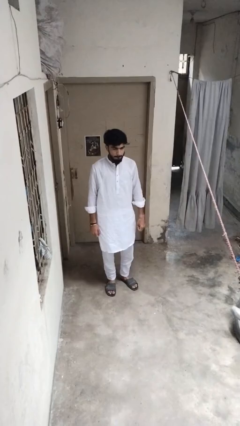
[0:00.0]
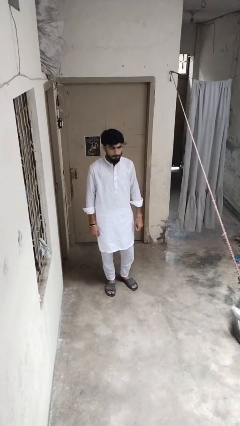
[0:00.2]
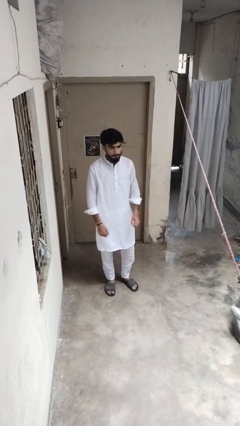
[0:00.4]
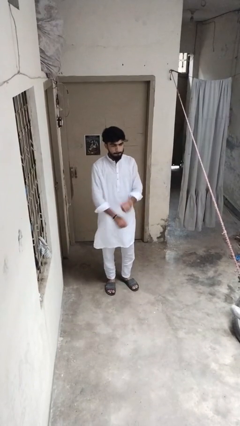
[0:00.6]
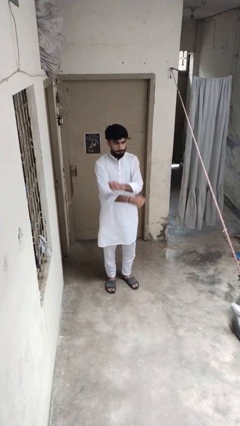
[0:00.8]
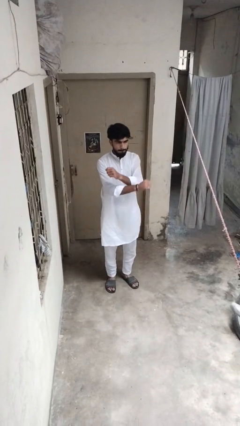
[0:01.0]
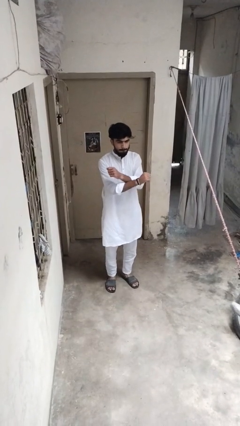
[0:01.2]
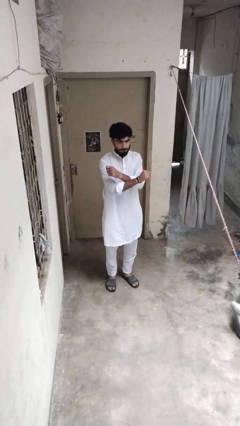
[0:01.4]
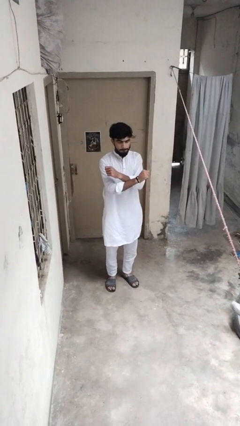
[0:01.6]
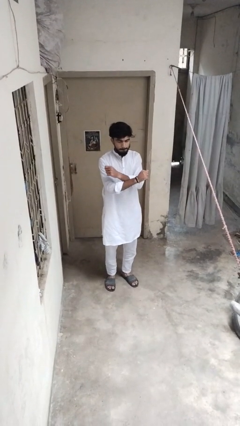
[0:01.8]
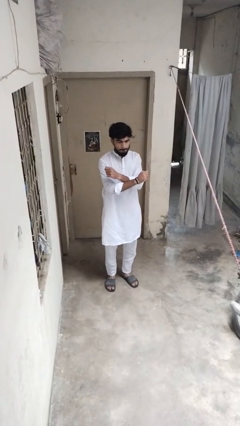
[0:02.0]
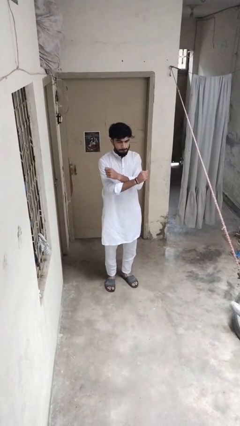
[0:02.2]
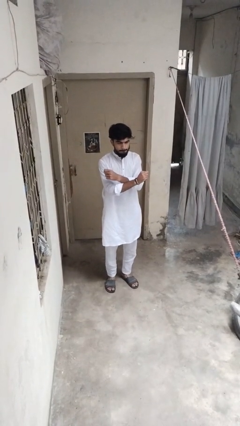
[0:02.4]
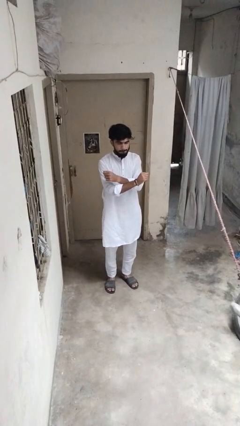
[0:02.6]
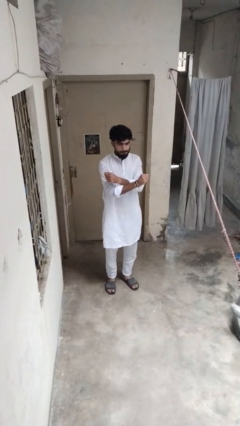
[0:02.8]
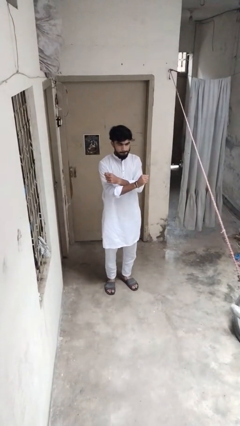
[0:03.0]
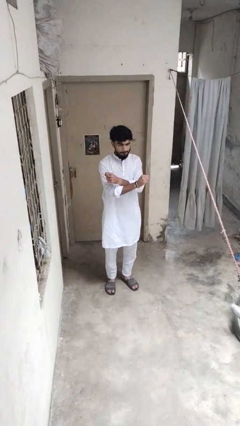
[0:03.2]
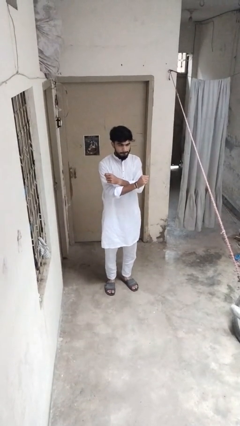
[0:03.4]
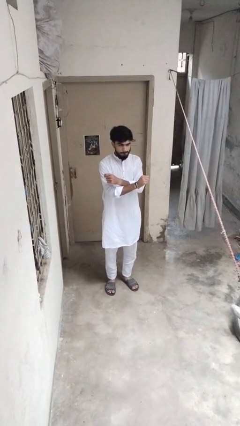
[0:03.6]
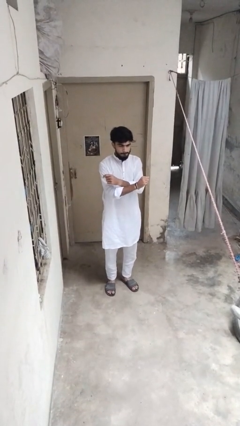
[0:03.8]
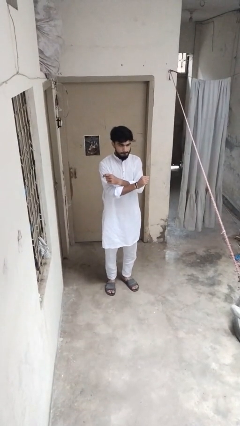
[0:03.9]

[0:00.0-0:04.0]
person gestures arms x

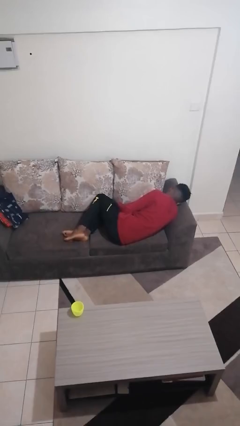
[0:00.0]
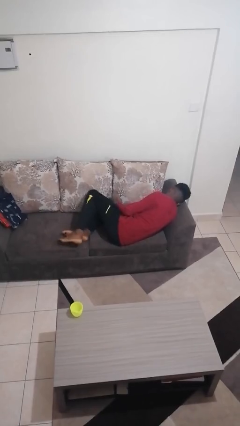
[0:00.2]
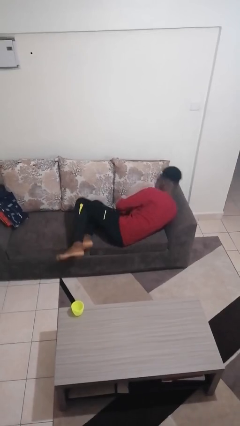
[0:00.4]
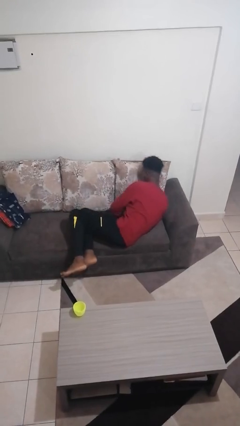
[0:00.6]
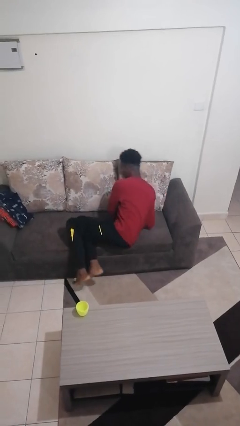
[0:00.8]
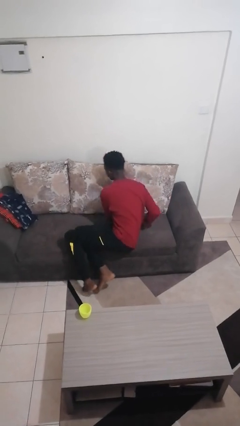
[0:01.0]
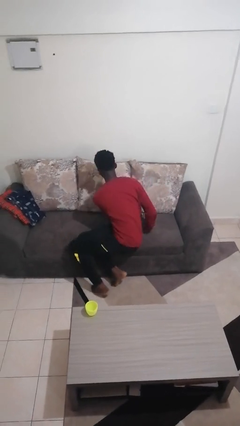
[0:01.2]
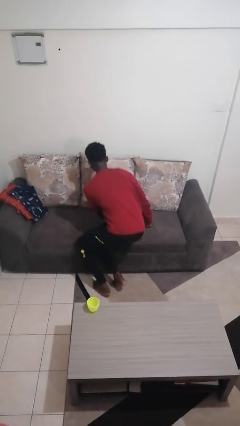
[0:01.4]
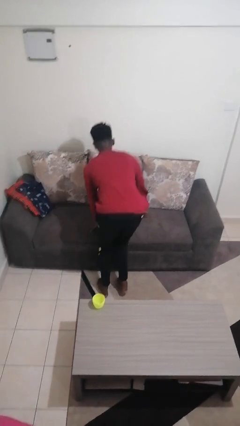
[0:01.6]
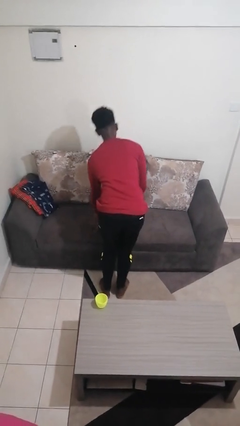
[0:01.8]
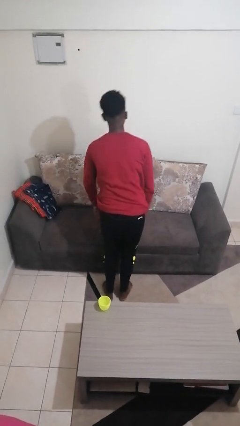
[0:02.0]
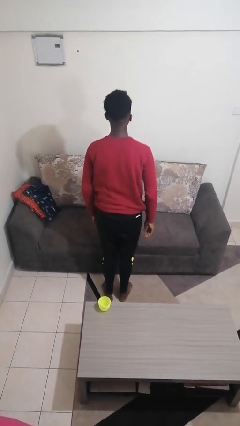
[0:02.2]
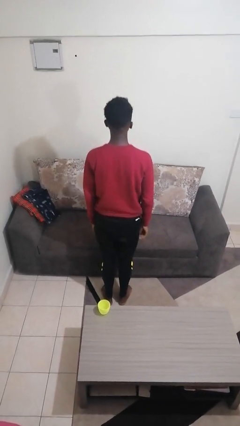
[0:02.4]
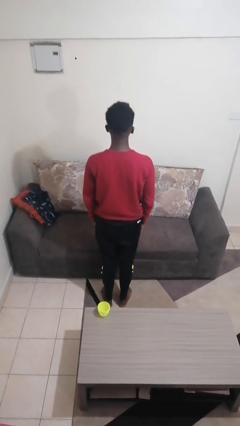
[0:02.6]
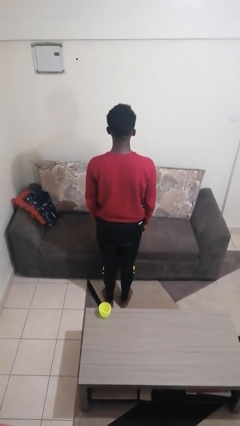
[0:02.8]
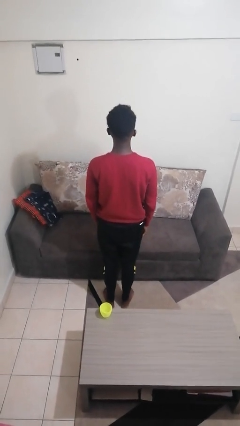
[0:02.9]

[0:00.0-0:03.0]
person stands up

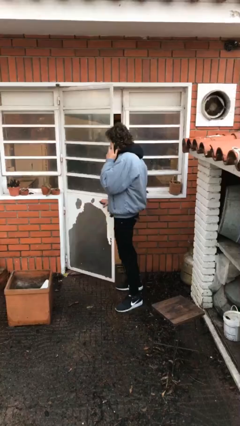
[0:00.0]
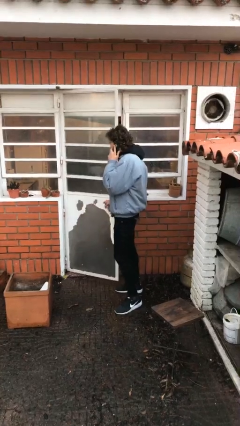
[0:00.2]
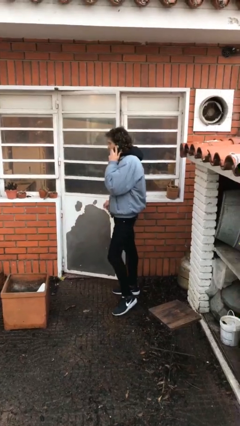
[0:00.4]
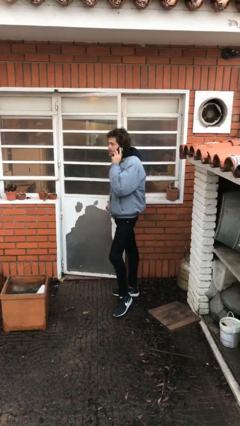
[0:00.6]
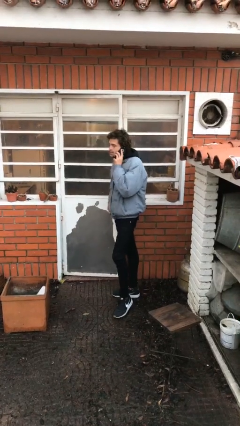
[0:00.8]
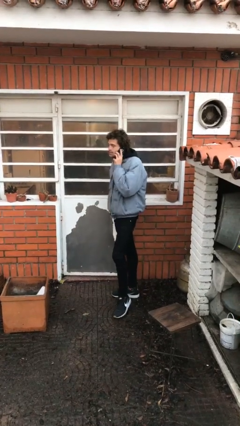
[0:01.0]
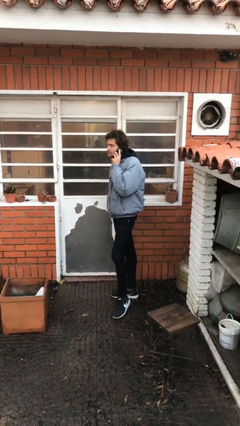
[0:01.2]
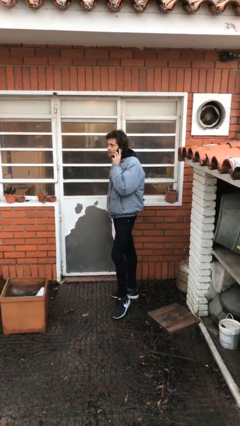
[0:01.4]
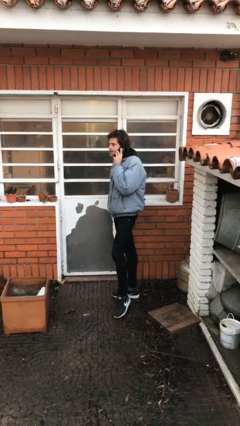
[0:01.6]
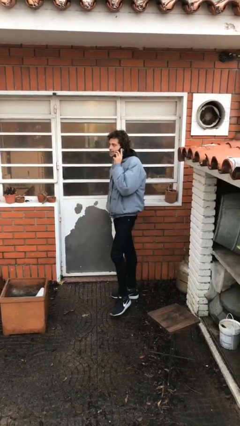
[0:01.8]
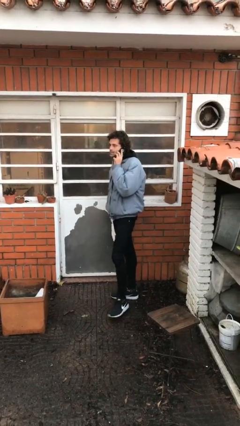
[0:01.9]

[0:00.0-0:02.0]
person closes facility door

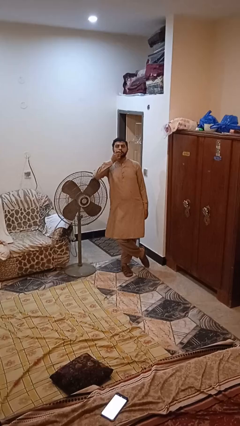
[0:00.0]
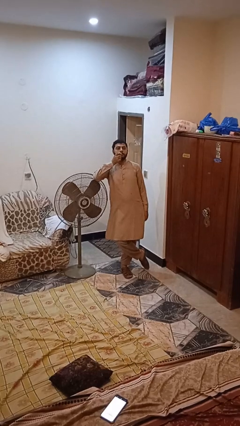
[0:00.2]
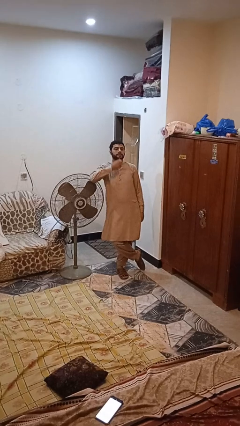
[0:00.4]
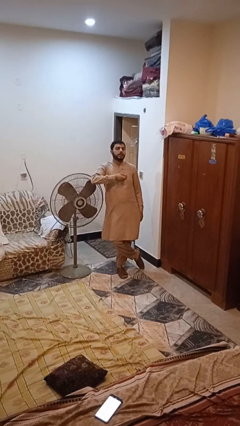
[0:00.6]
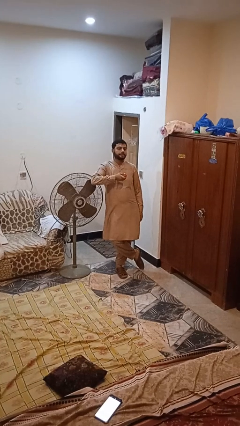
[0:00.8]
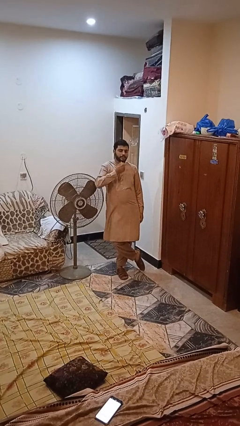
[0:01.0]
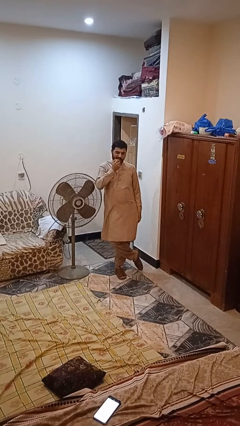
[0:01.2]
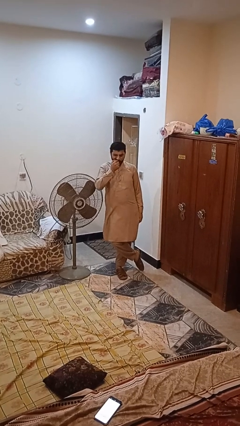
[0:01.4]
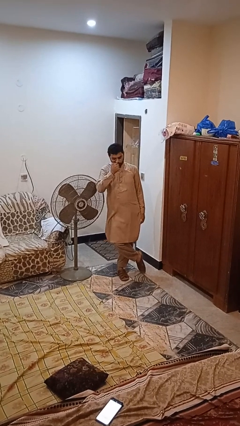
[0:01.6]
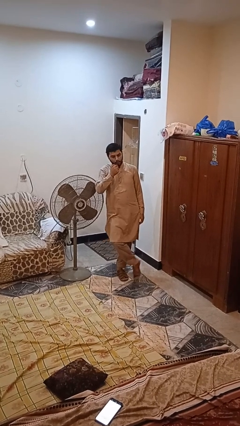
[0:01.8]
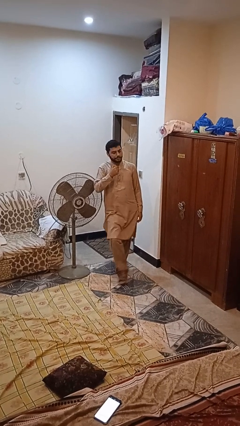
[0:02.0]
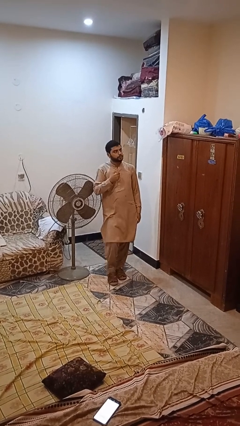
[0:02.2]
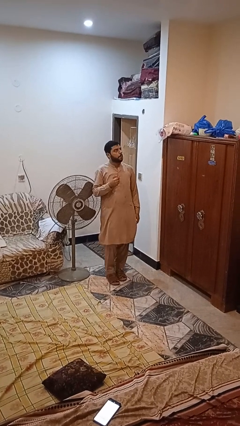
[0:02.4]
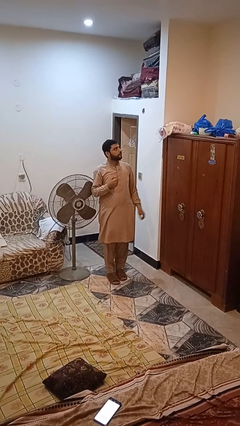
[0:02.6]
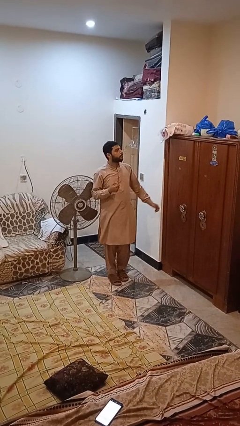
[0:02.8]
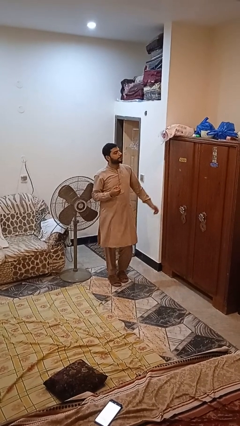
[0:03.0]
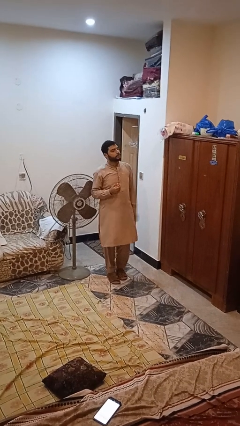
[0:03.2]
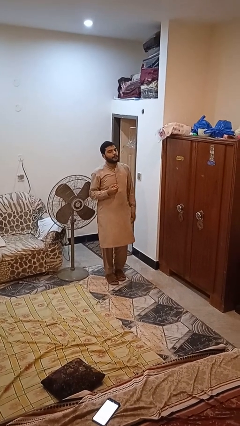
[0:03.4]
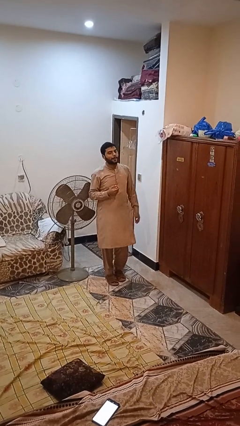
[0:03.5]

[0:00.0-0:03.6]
person eats apple

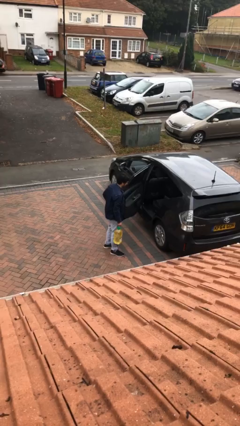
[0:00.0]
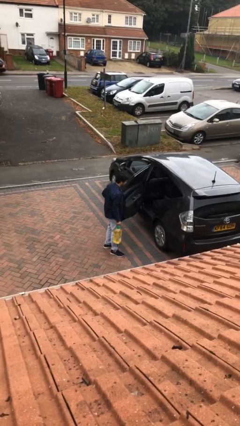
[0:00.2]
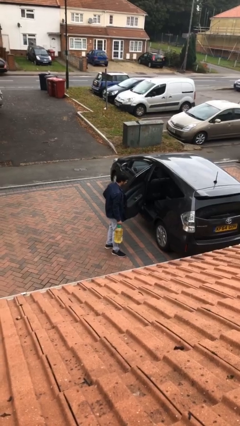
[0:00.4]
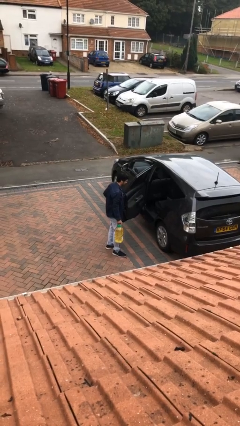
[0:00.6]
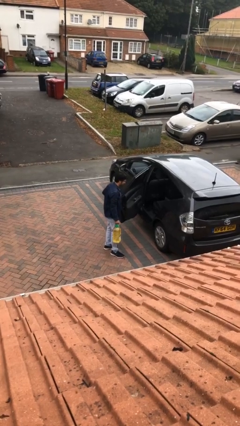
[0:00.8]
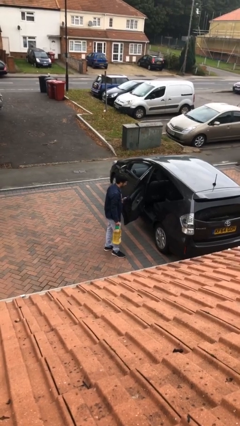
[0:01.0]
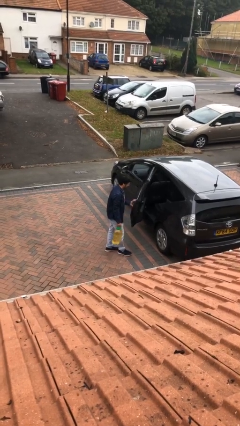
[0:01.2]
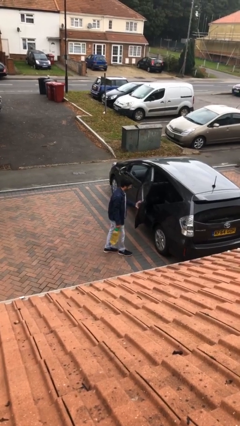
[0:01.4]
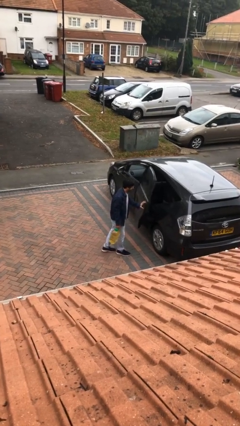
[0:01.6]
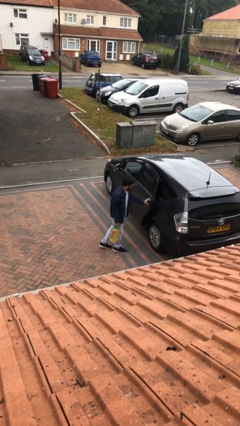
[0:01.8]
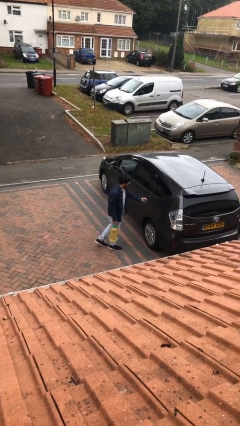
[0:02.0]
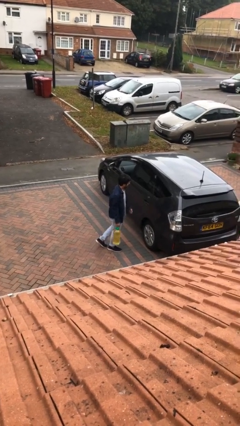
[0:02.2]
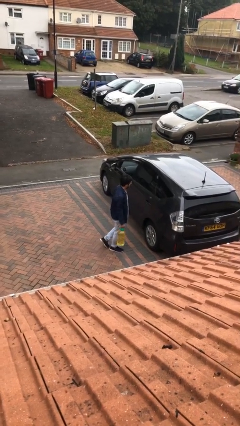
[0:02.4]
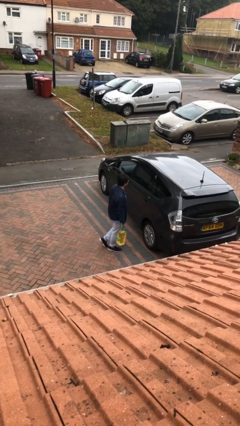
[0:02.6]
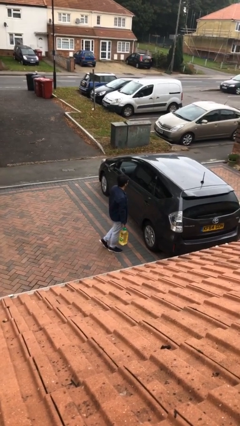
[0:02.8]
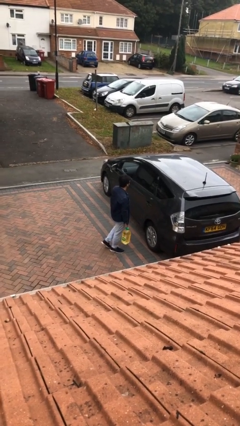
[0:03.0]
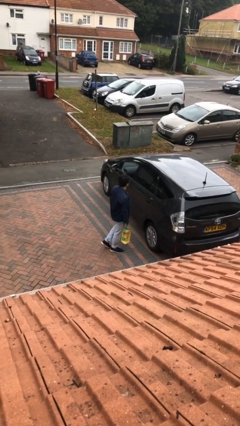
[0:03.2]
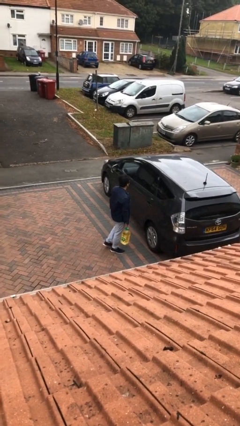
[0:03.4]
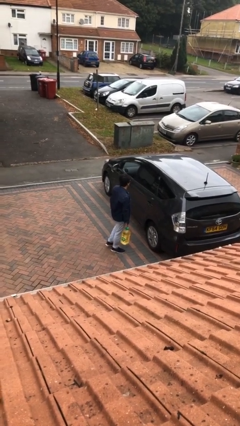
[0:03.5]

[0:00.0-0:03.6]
person closes car door

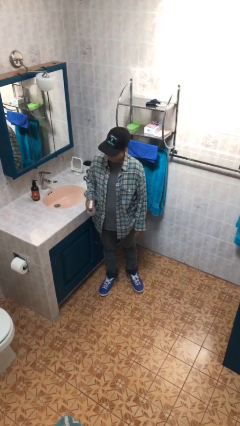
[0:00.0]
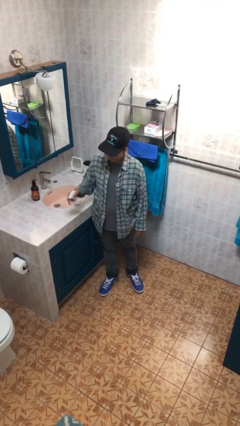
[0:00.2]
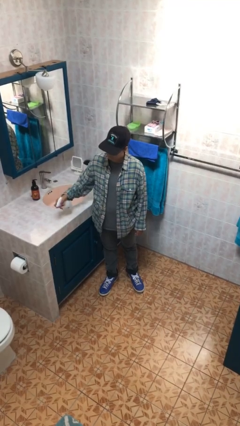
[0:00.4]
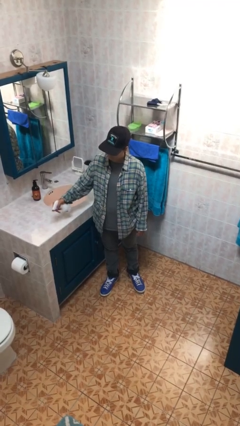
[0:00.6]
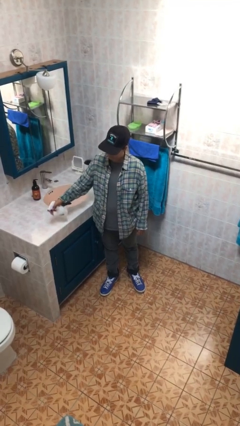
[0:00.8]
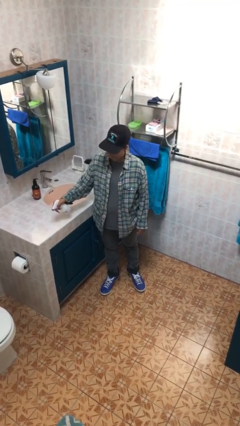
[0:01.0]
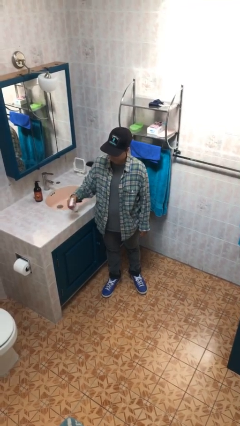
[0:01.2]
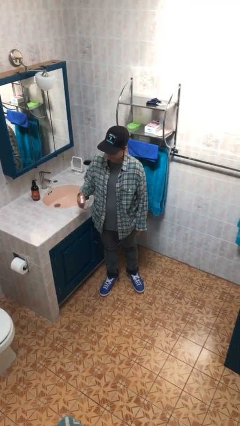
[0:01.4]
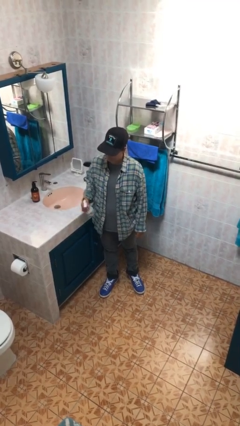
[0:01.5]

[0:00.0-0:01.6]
person sprays from bottle
